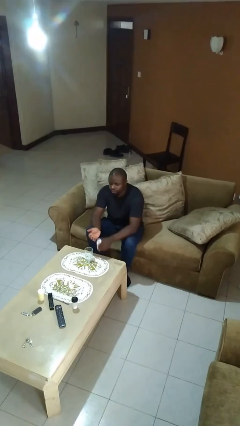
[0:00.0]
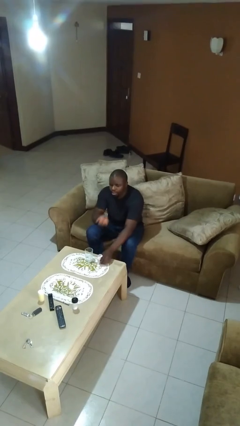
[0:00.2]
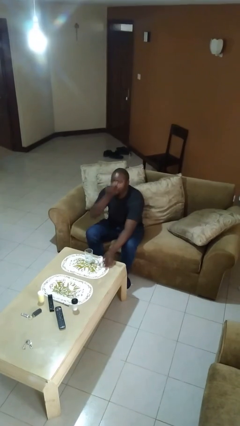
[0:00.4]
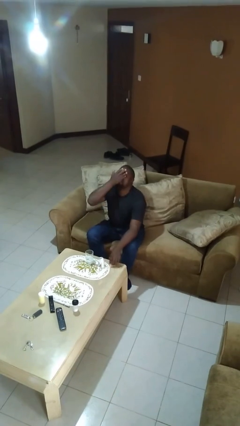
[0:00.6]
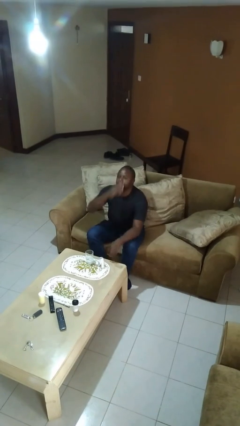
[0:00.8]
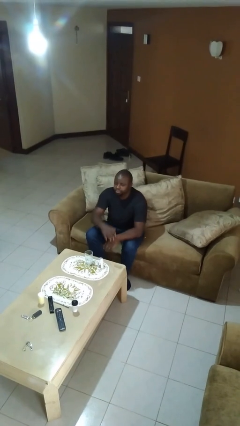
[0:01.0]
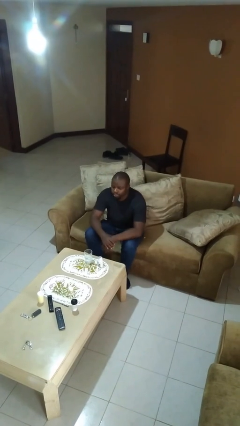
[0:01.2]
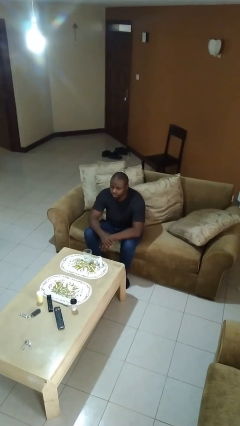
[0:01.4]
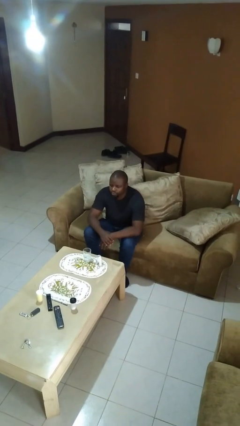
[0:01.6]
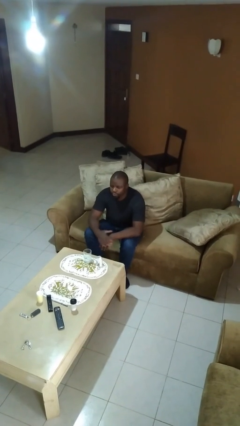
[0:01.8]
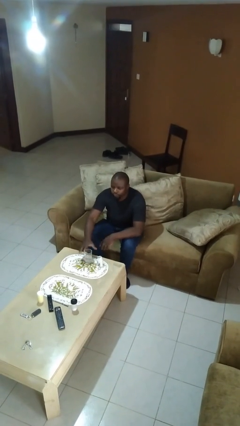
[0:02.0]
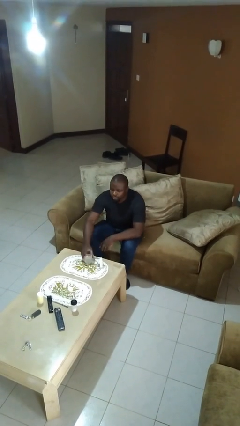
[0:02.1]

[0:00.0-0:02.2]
person takes medicine pills

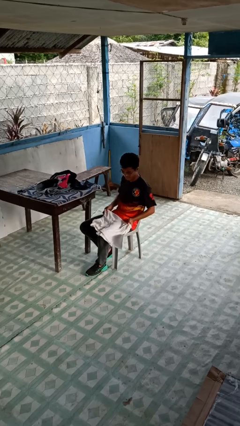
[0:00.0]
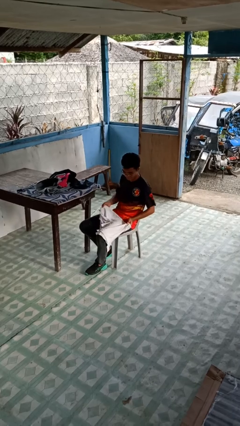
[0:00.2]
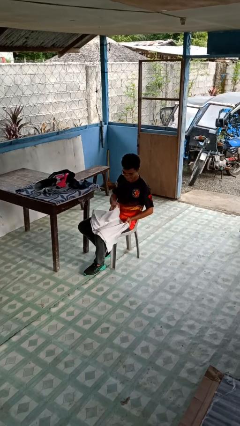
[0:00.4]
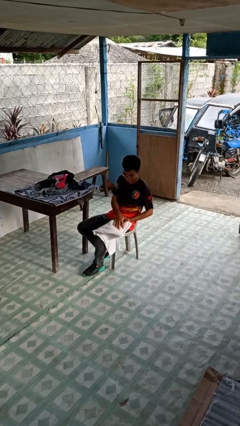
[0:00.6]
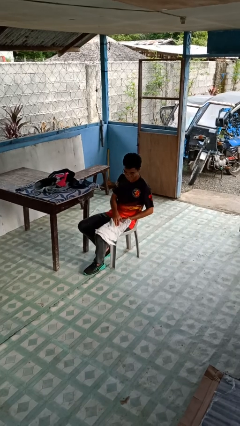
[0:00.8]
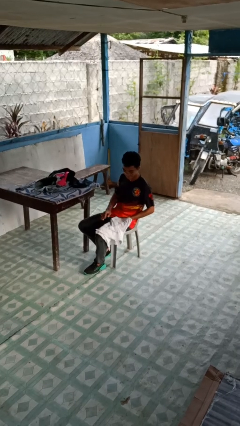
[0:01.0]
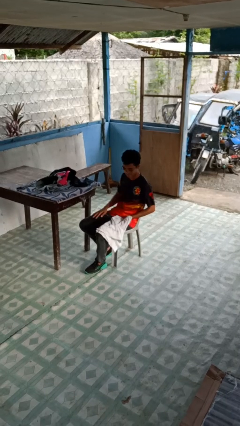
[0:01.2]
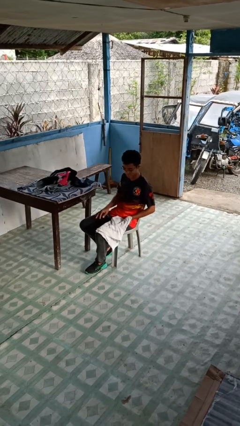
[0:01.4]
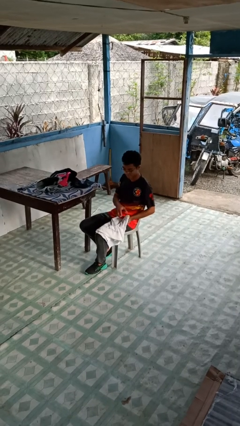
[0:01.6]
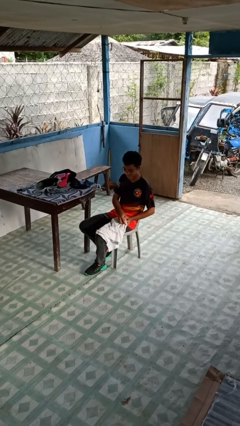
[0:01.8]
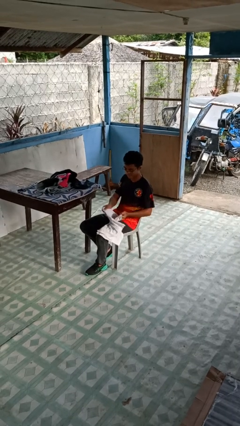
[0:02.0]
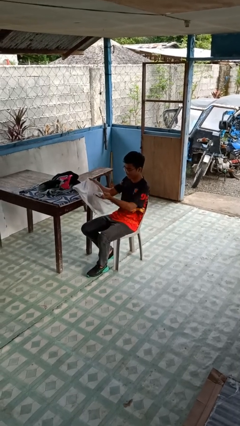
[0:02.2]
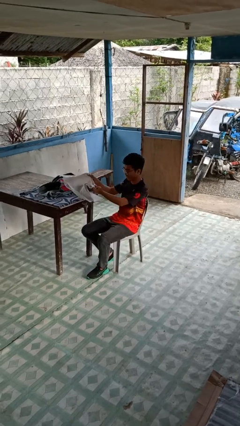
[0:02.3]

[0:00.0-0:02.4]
person folds shirt

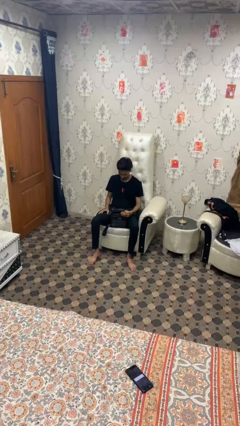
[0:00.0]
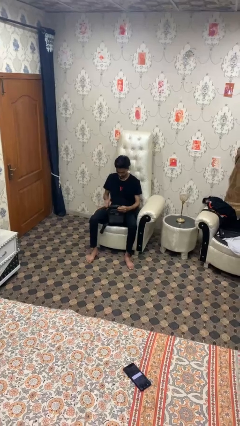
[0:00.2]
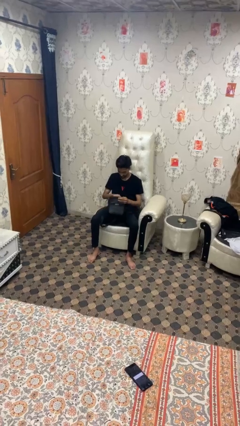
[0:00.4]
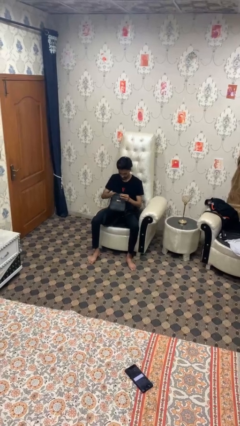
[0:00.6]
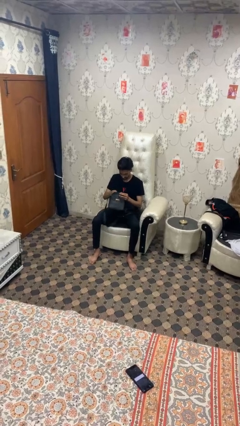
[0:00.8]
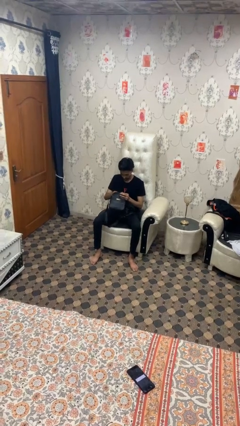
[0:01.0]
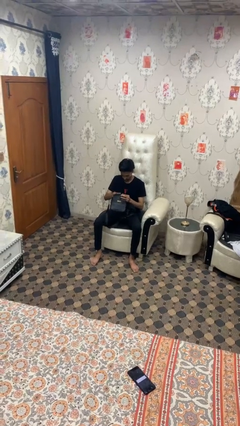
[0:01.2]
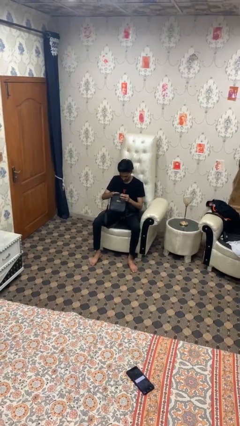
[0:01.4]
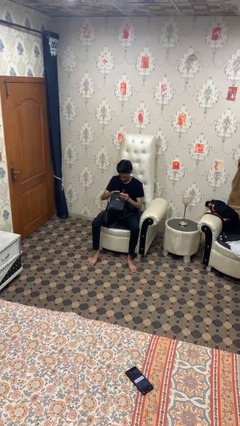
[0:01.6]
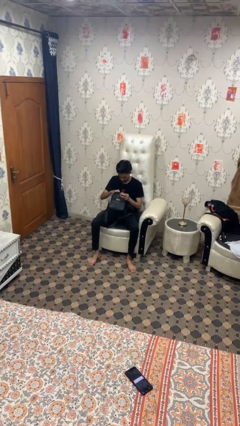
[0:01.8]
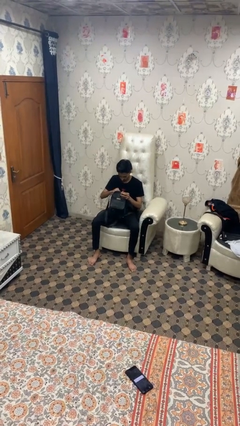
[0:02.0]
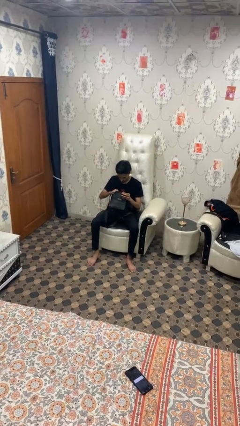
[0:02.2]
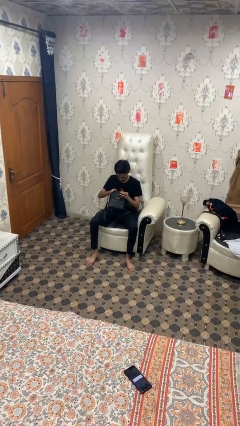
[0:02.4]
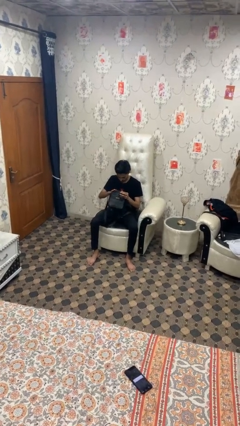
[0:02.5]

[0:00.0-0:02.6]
person searches in bag

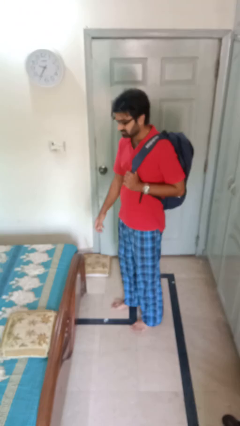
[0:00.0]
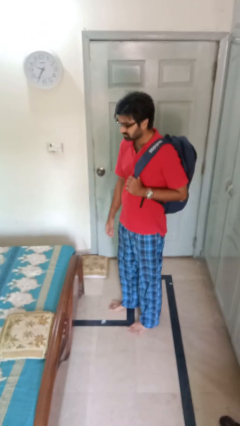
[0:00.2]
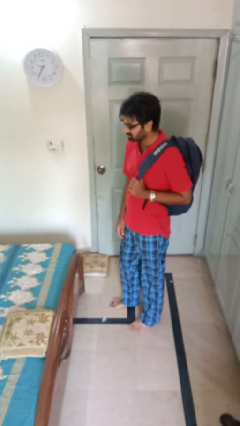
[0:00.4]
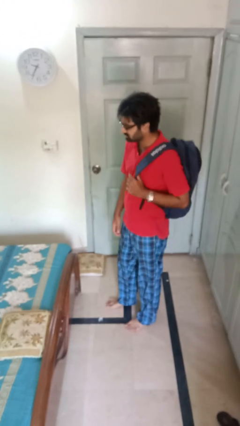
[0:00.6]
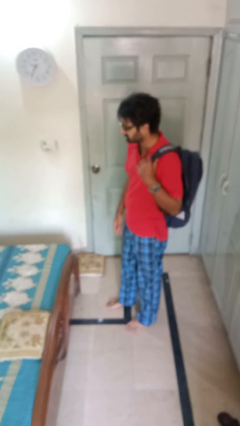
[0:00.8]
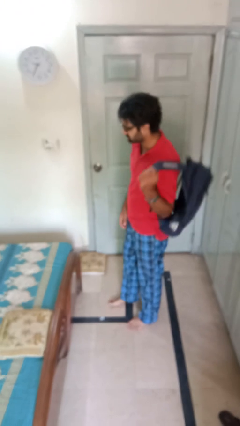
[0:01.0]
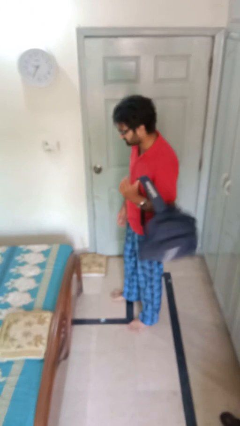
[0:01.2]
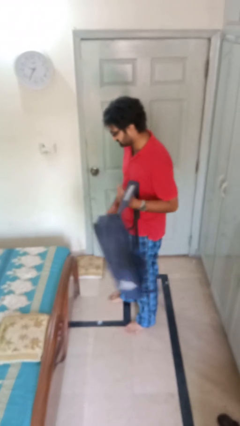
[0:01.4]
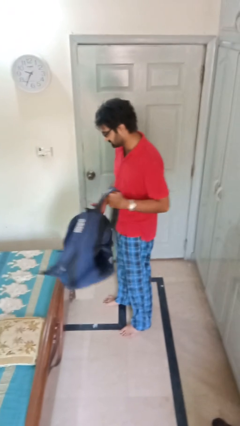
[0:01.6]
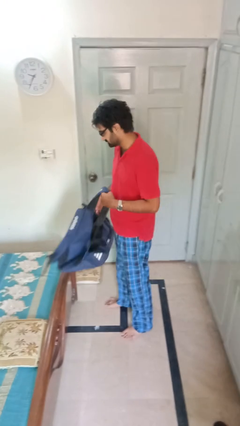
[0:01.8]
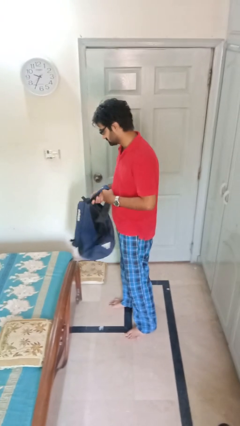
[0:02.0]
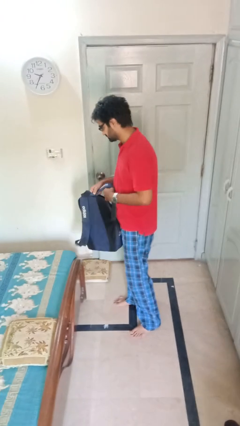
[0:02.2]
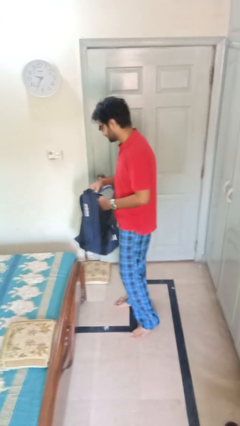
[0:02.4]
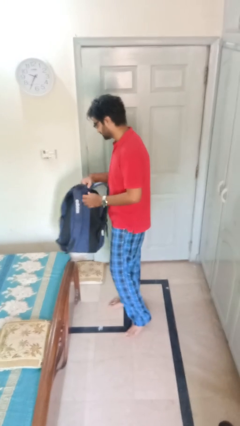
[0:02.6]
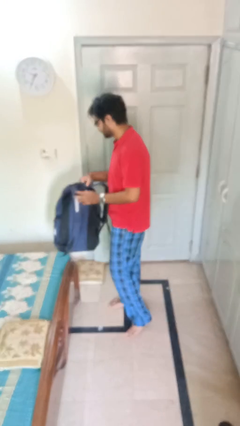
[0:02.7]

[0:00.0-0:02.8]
person takes off backpack

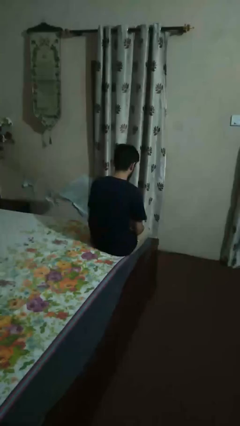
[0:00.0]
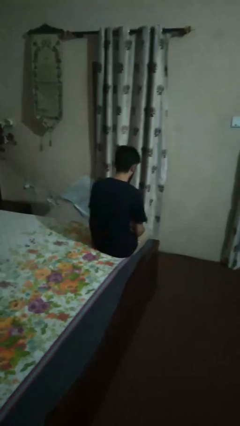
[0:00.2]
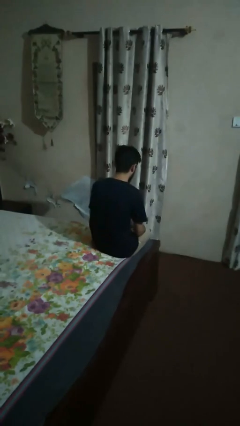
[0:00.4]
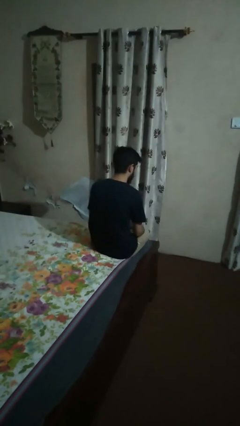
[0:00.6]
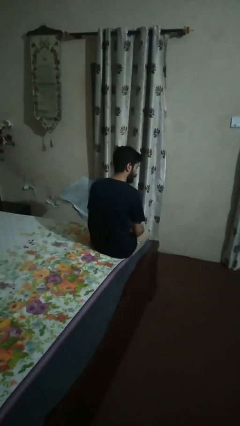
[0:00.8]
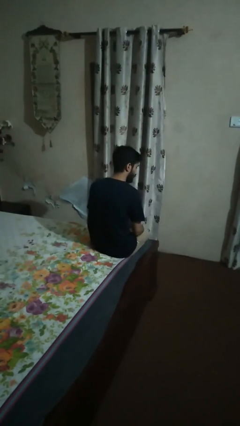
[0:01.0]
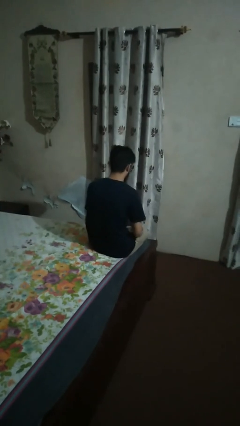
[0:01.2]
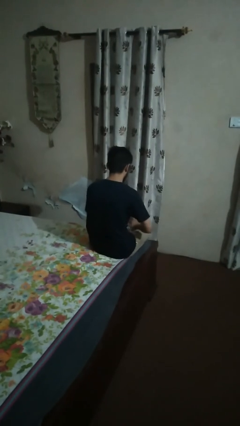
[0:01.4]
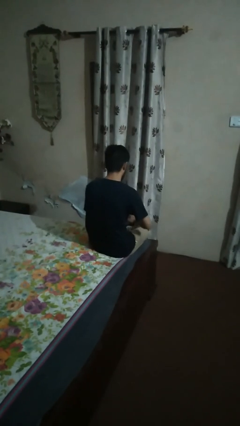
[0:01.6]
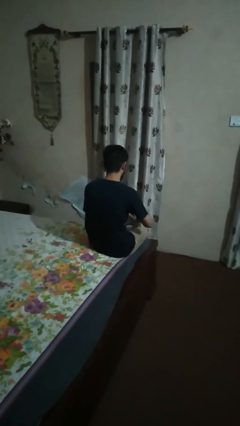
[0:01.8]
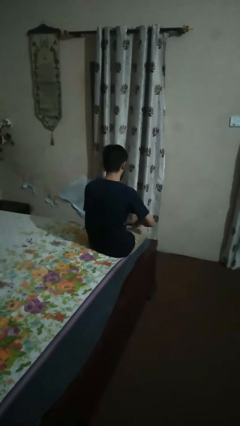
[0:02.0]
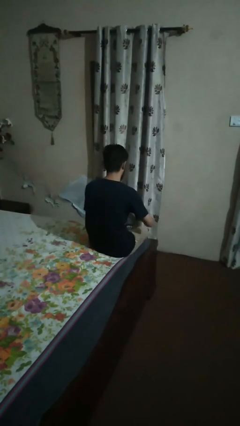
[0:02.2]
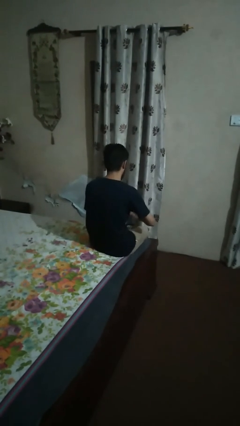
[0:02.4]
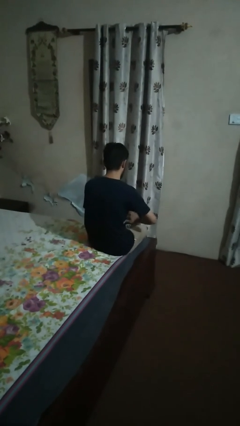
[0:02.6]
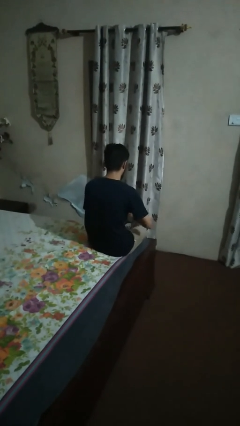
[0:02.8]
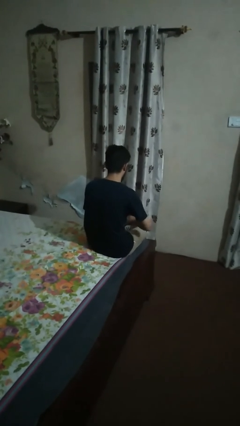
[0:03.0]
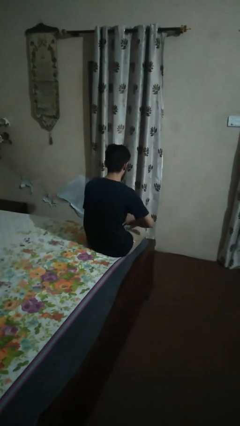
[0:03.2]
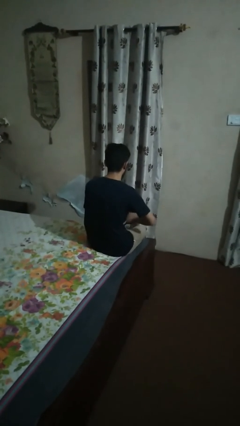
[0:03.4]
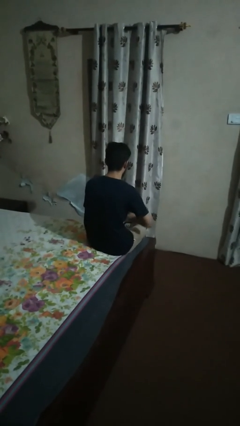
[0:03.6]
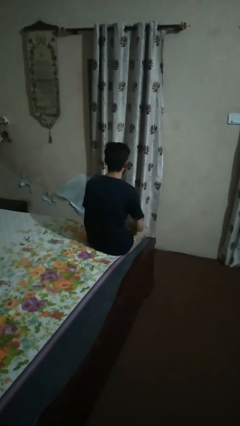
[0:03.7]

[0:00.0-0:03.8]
person interacts with tablet

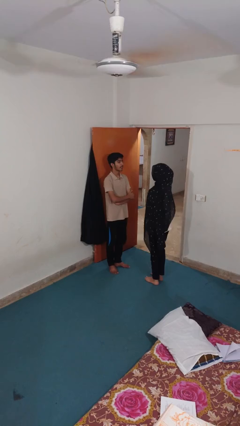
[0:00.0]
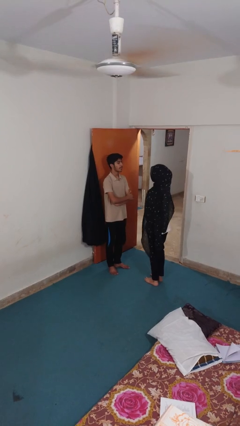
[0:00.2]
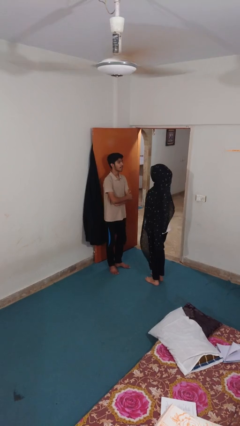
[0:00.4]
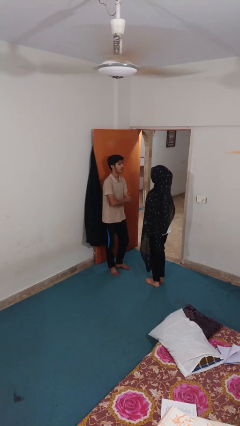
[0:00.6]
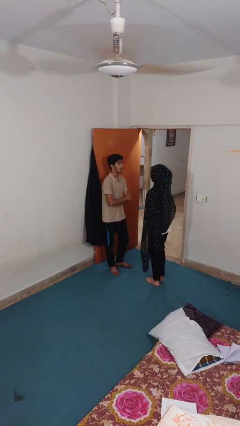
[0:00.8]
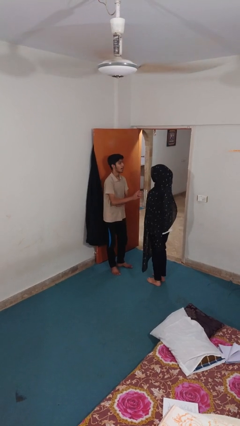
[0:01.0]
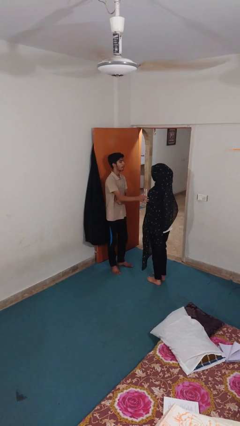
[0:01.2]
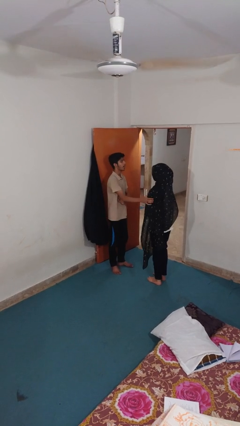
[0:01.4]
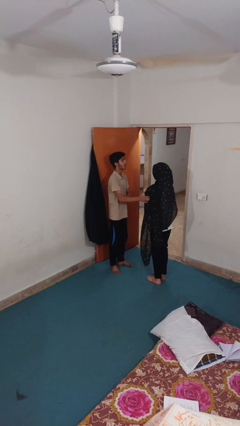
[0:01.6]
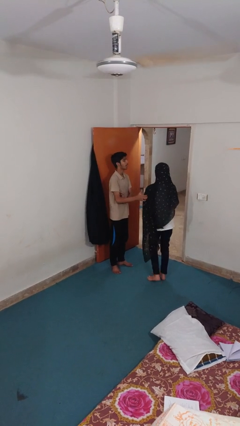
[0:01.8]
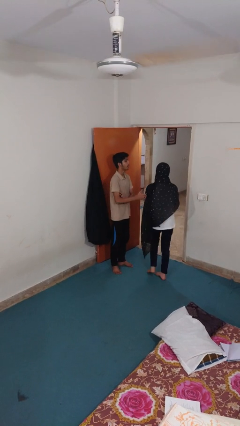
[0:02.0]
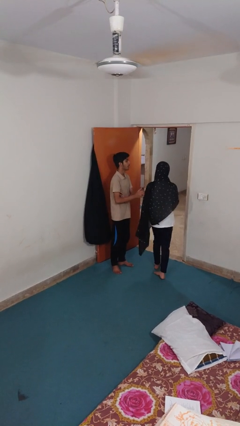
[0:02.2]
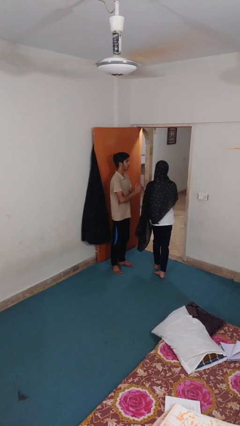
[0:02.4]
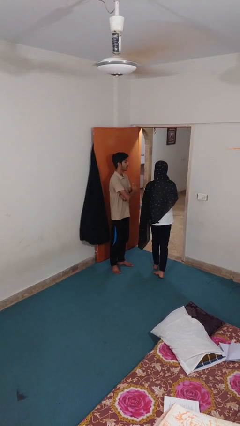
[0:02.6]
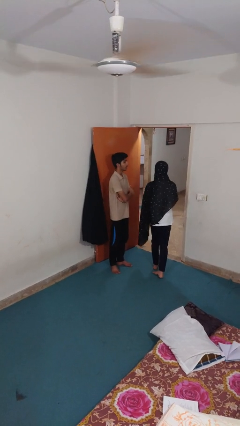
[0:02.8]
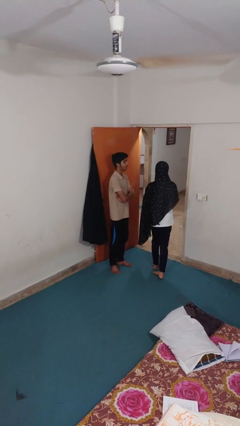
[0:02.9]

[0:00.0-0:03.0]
person shoves person

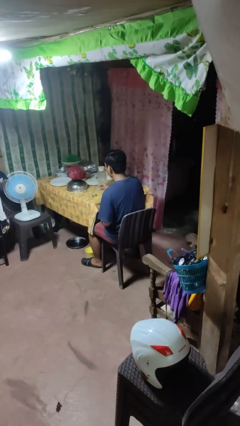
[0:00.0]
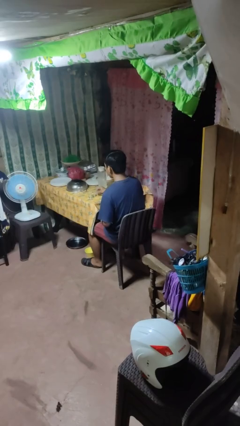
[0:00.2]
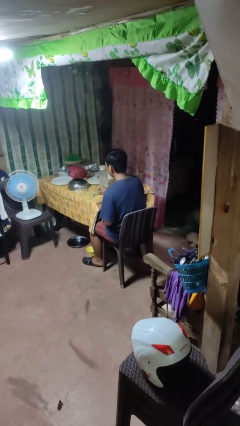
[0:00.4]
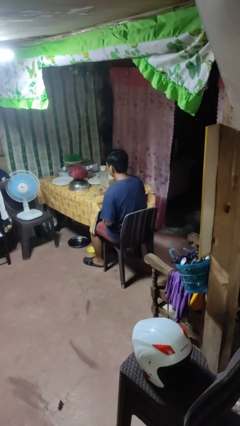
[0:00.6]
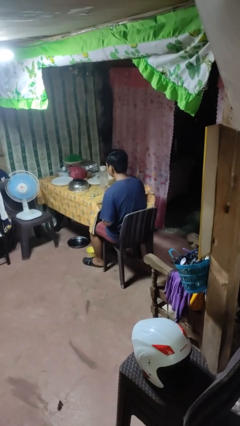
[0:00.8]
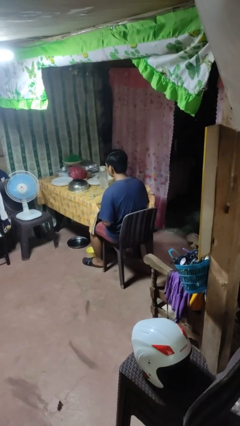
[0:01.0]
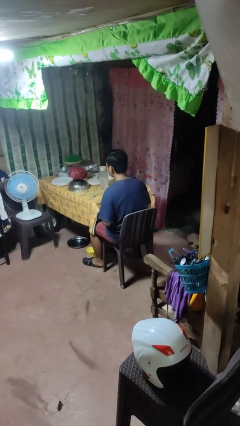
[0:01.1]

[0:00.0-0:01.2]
person puts down object on table
